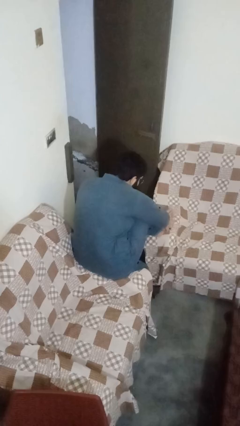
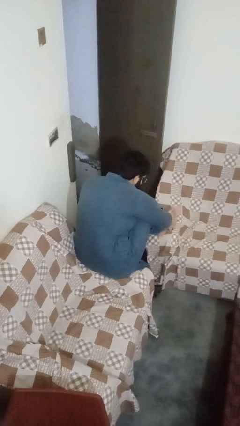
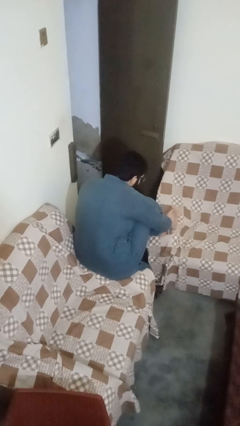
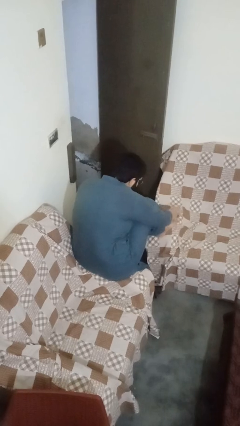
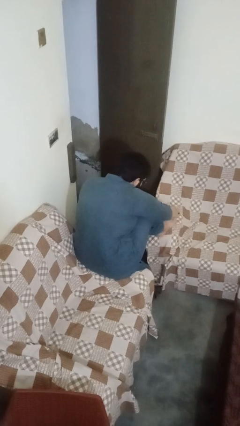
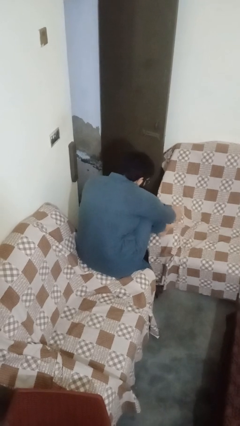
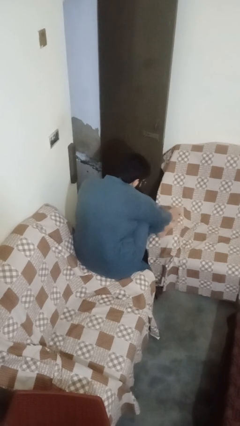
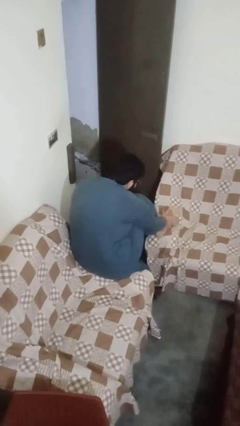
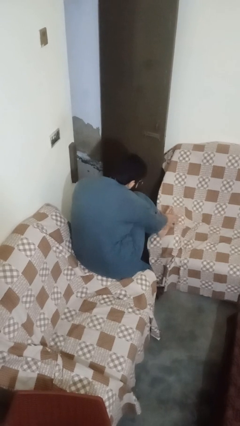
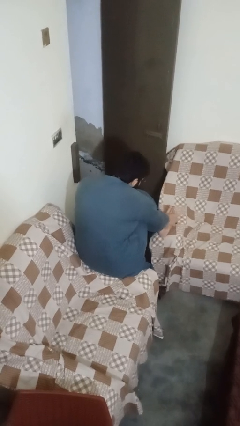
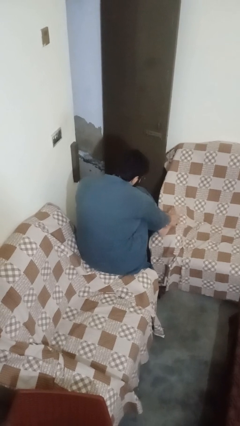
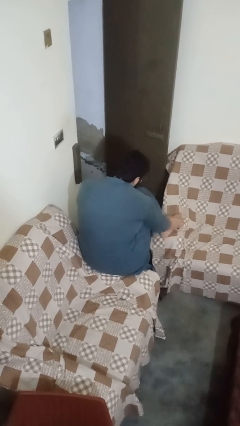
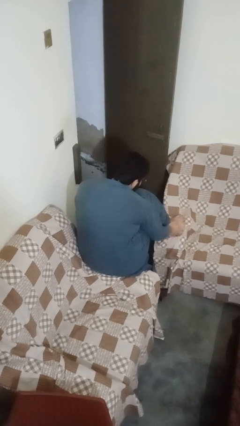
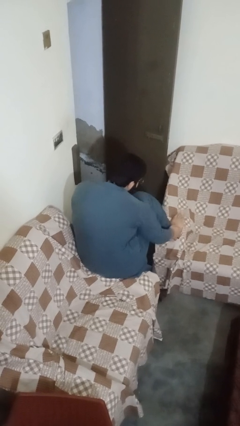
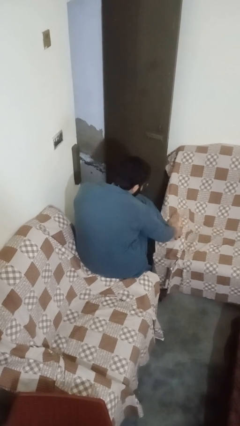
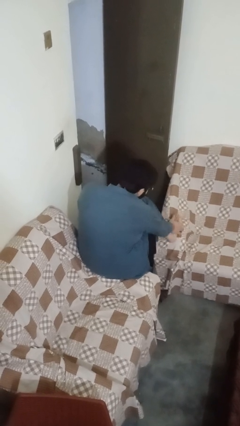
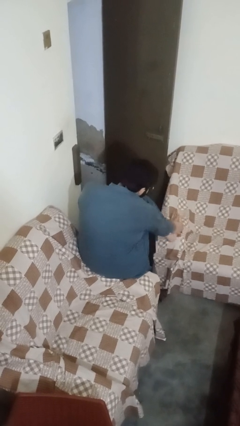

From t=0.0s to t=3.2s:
person stubs toe

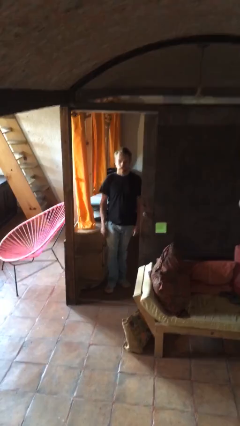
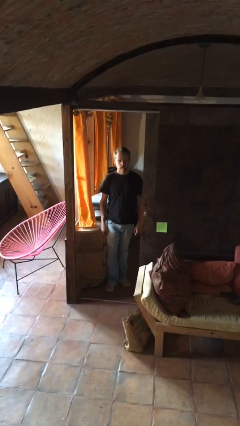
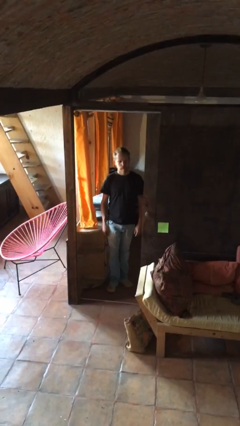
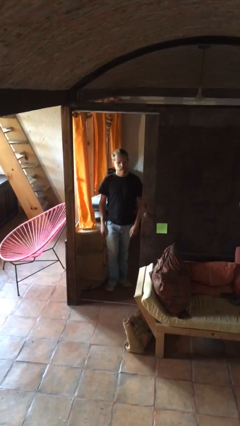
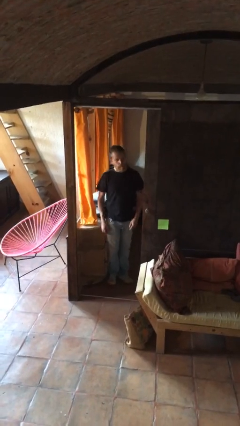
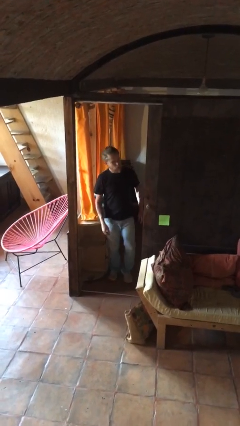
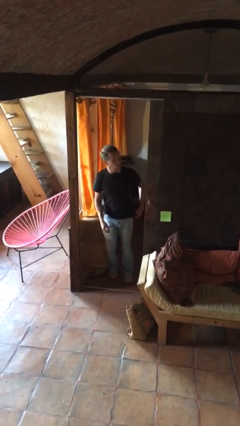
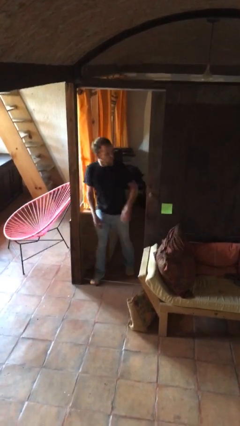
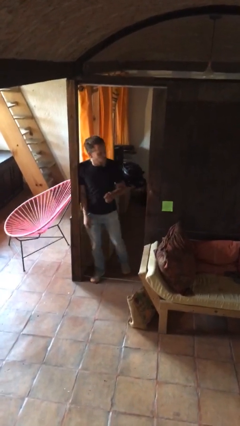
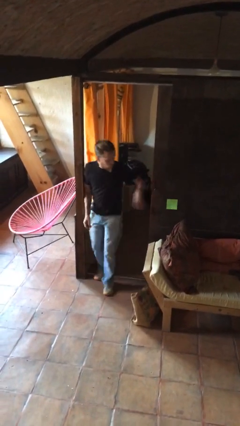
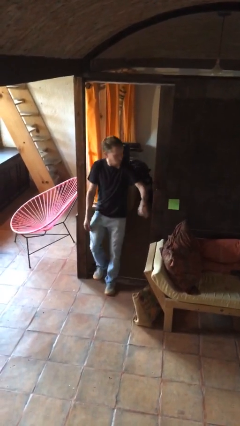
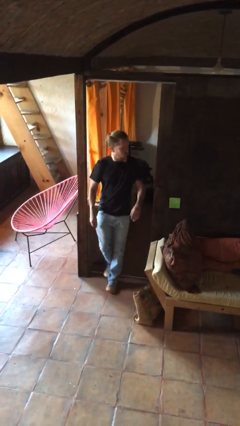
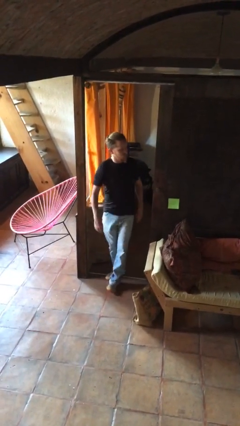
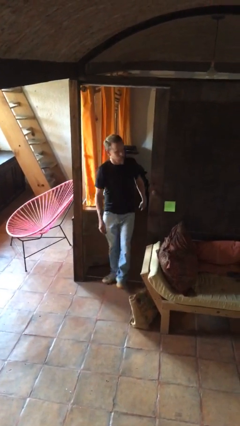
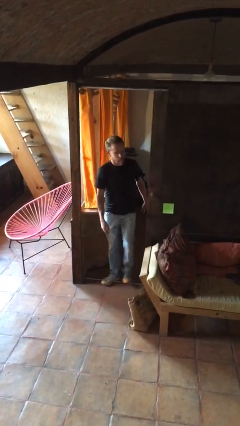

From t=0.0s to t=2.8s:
person bumps into wall

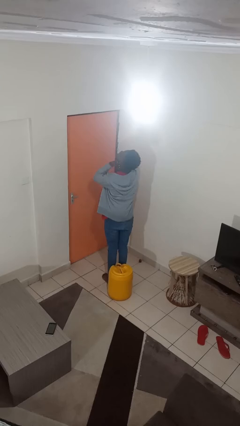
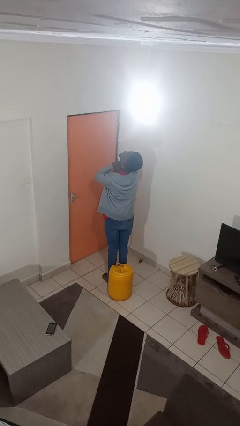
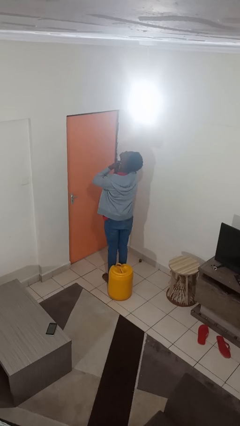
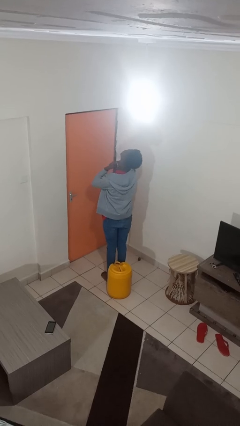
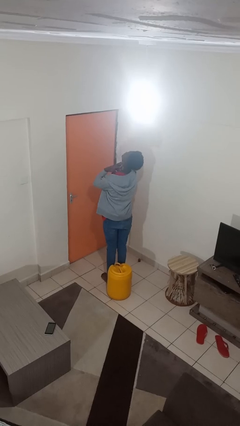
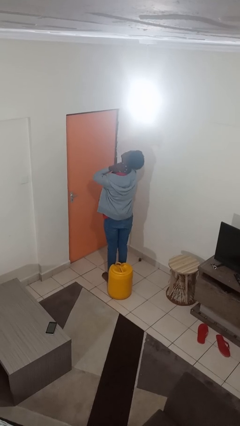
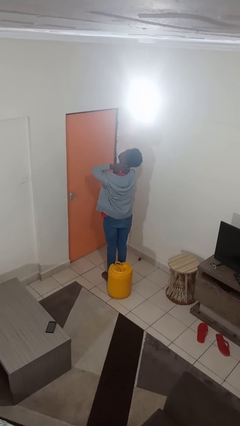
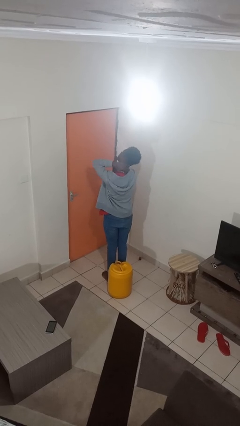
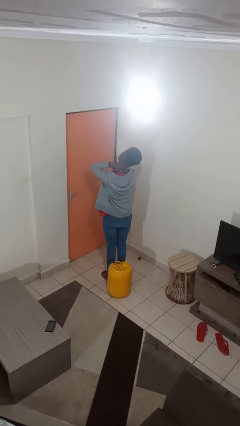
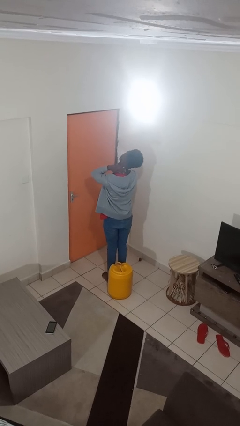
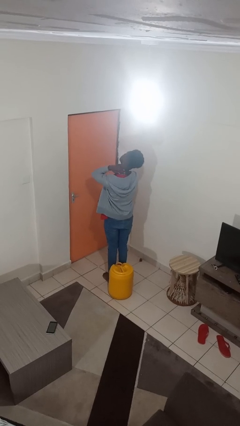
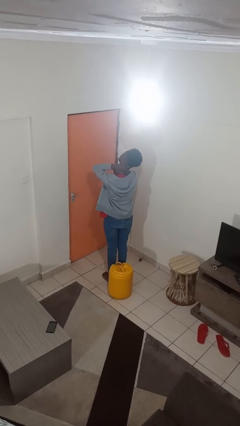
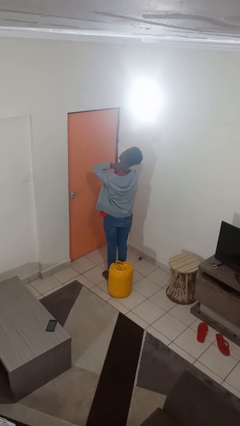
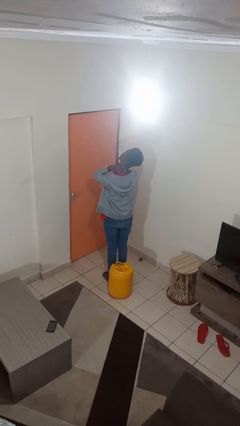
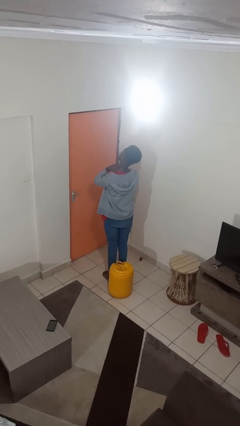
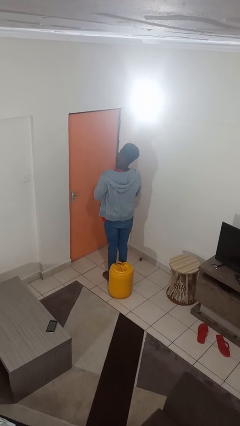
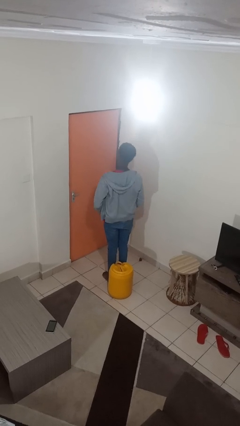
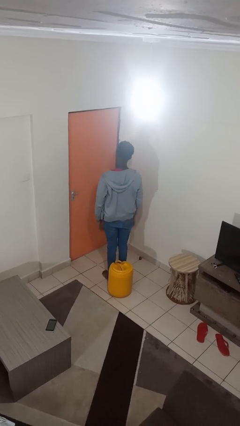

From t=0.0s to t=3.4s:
person rubs neck

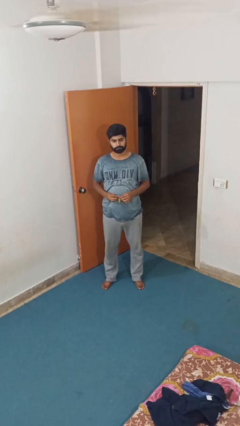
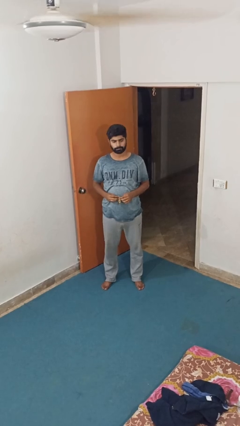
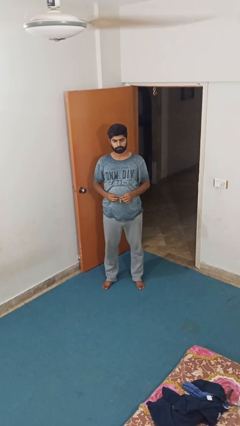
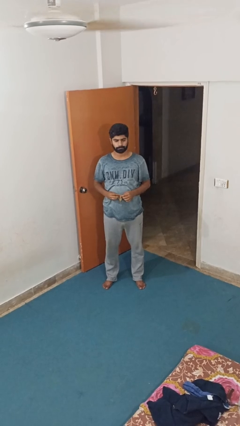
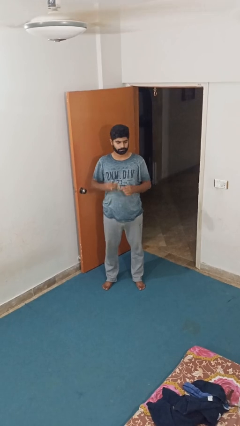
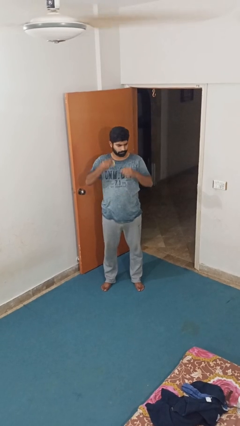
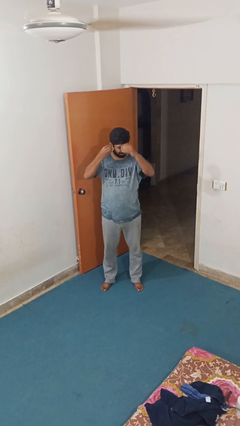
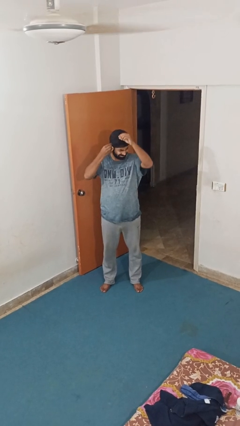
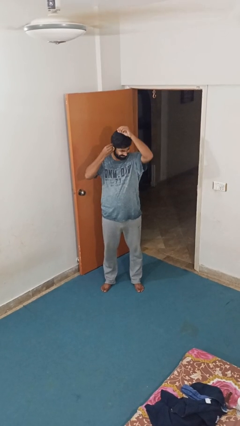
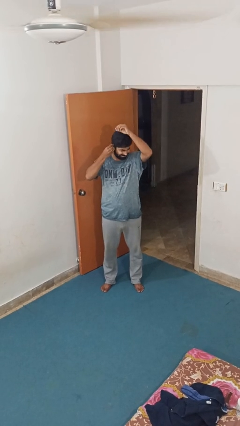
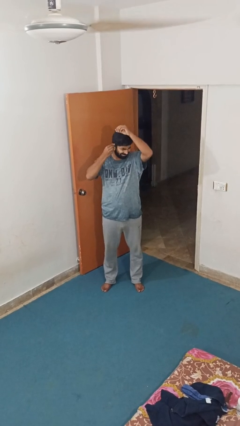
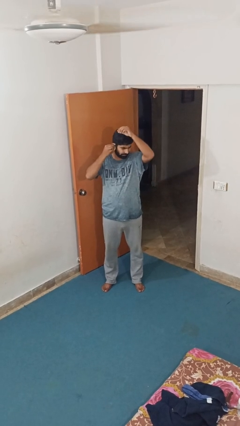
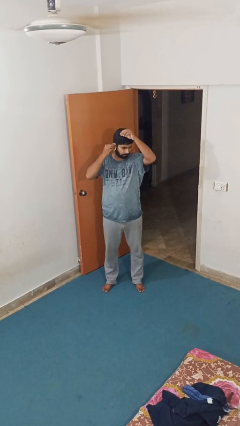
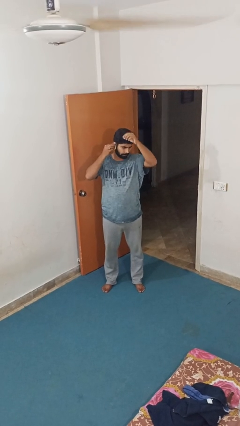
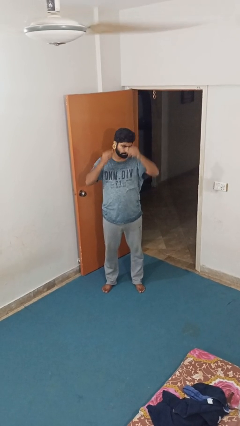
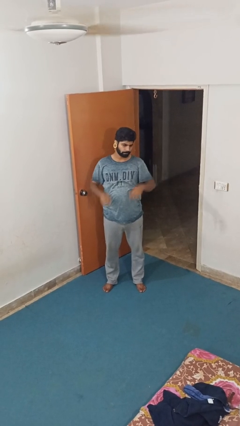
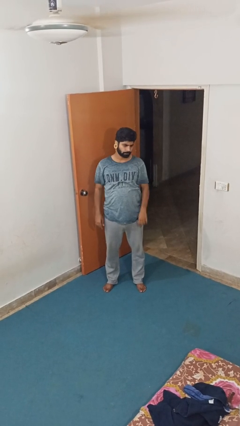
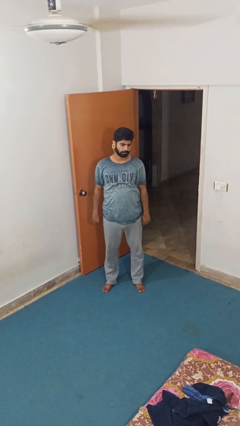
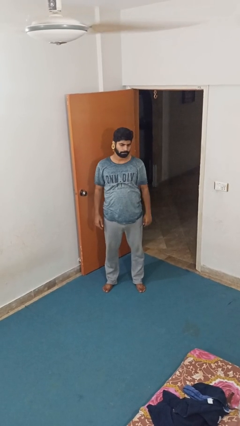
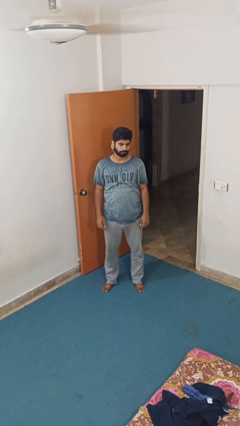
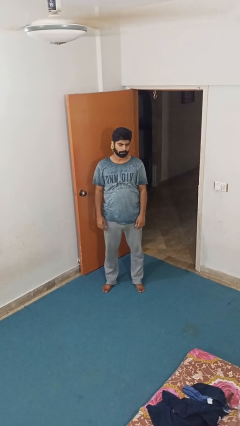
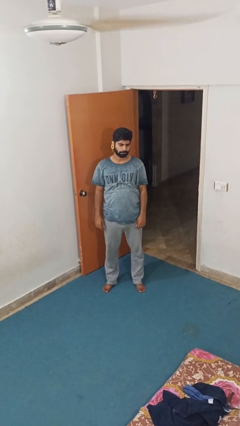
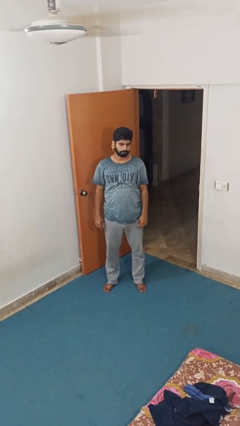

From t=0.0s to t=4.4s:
person puts on earrings

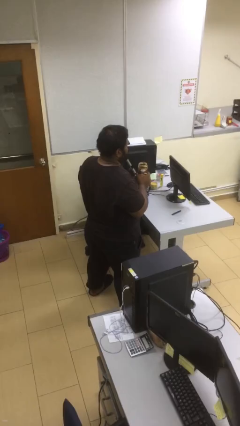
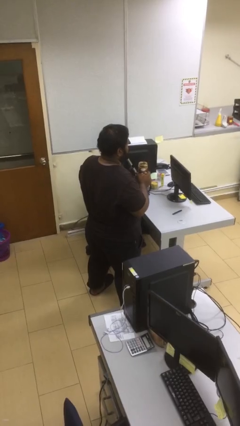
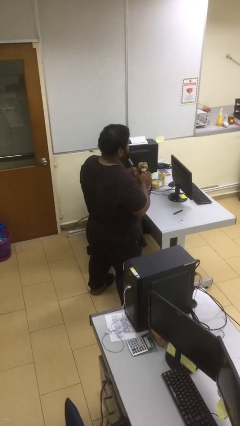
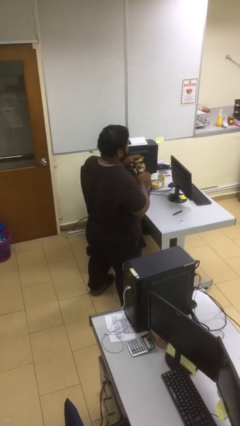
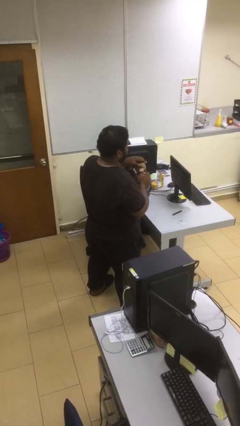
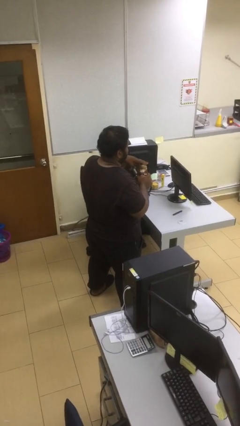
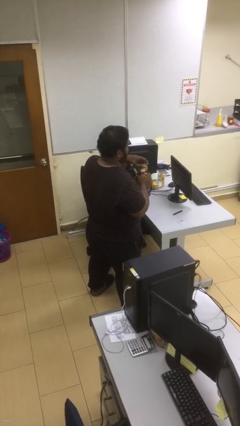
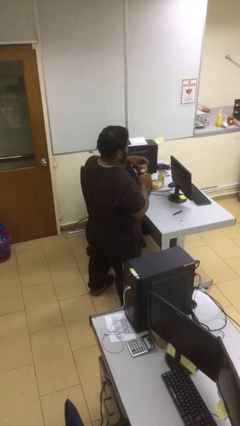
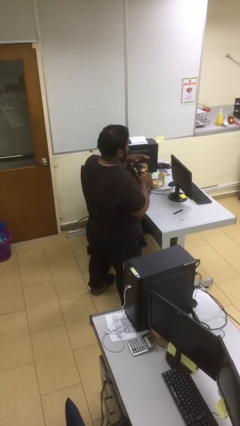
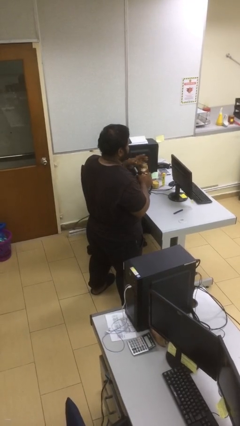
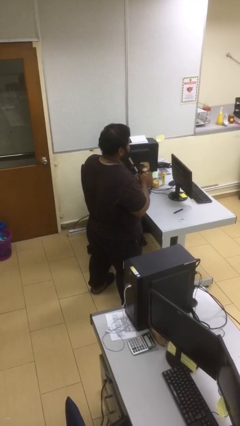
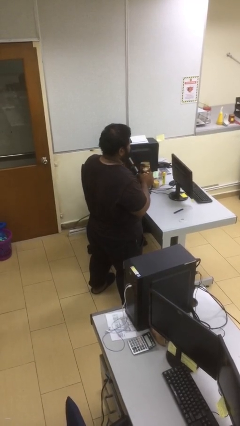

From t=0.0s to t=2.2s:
person closes jar

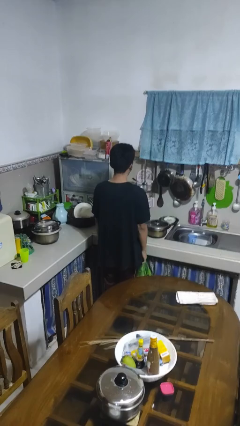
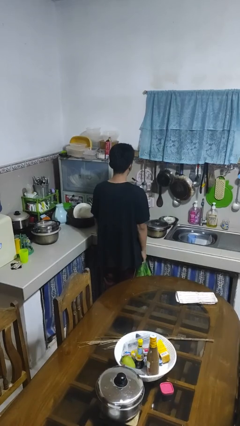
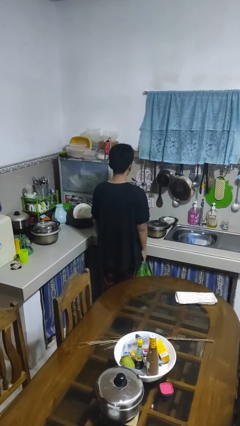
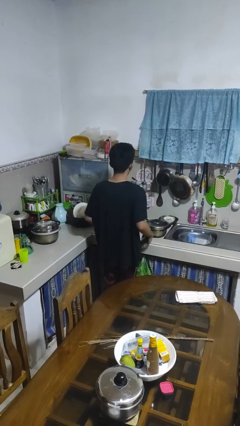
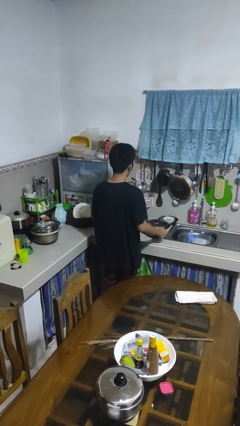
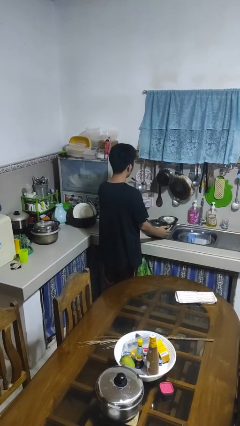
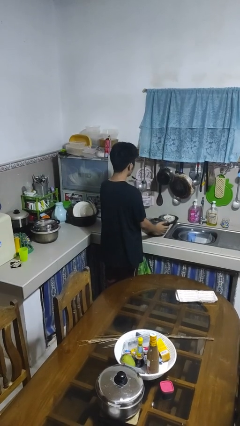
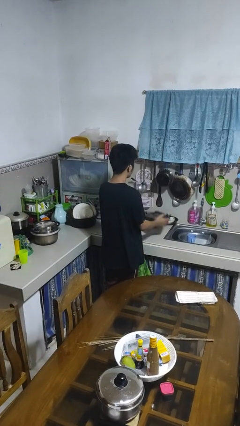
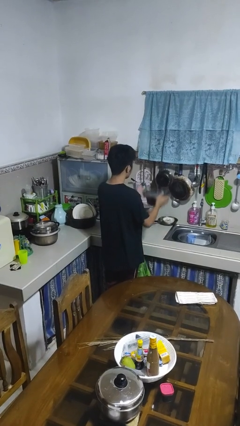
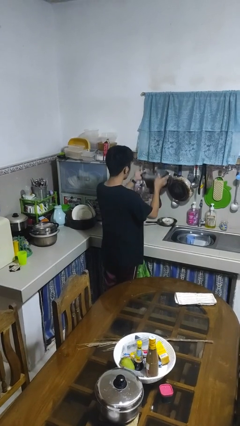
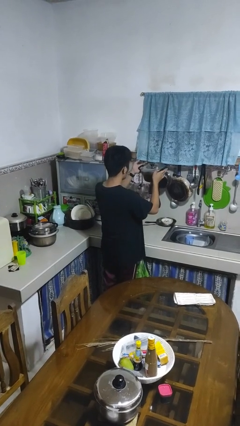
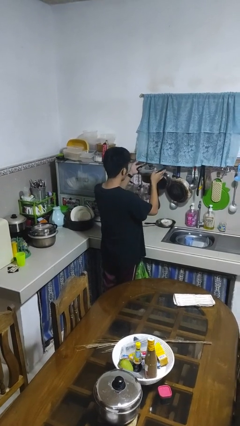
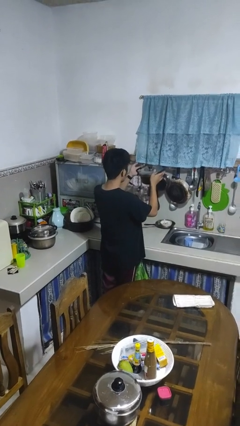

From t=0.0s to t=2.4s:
person picks up object from countertop
